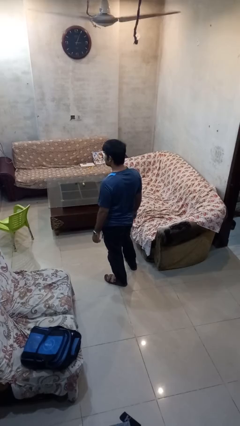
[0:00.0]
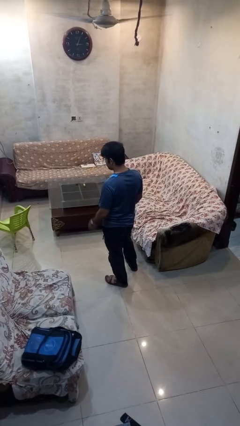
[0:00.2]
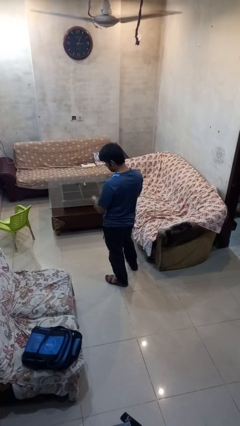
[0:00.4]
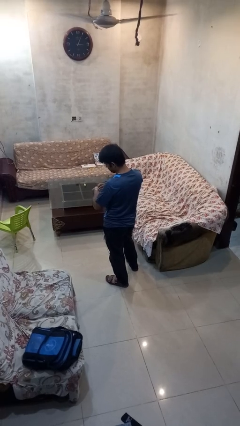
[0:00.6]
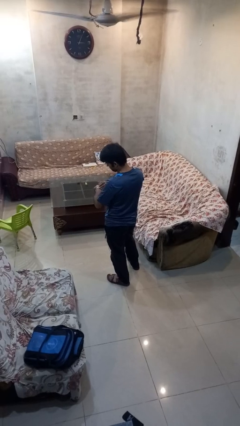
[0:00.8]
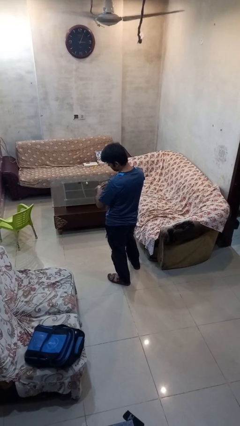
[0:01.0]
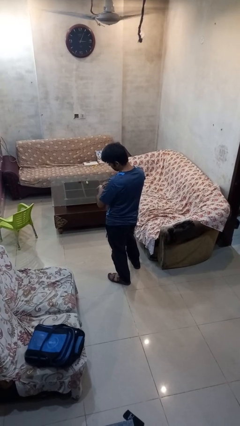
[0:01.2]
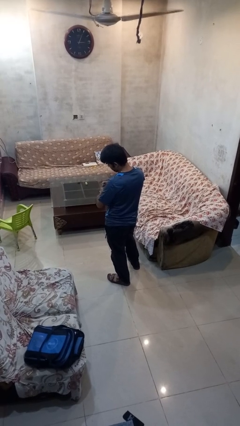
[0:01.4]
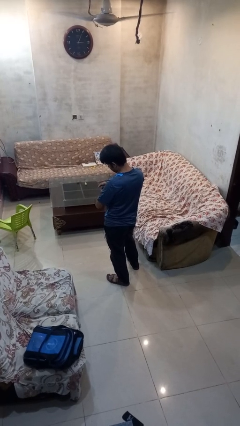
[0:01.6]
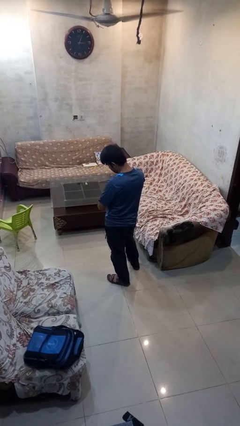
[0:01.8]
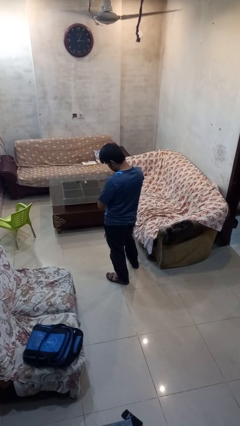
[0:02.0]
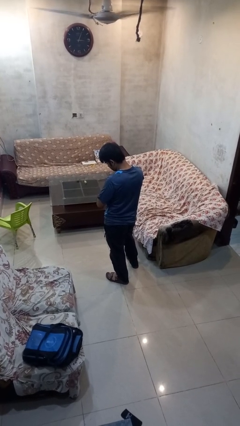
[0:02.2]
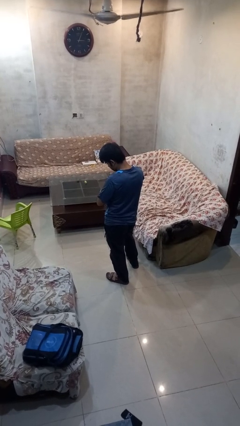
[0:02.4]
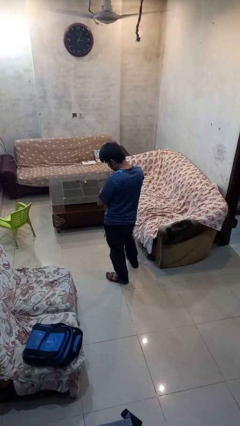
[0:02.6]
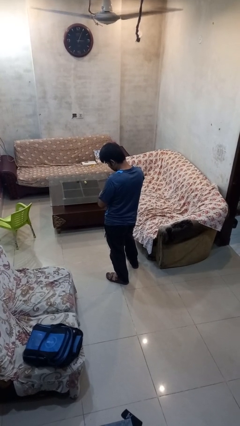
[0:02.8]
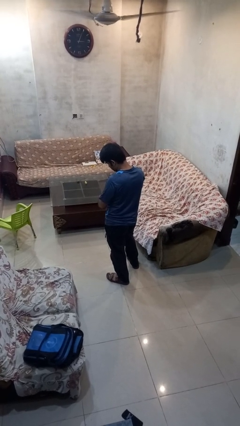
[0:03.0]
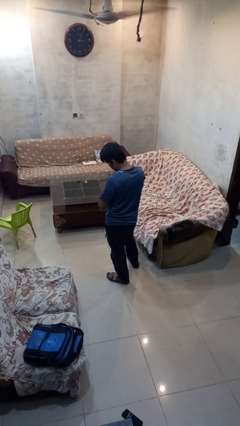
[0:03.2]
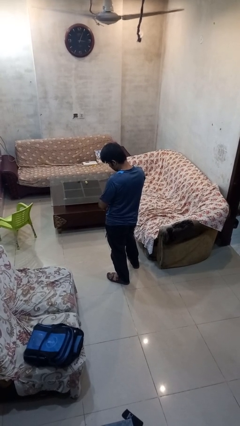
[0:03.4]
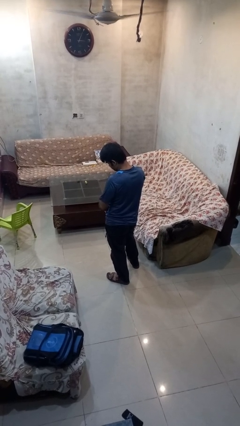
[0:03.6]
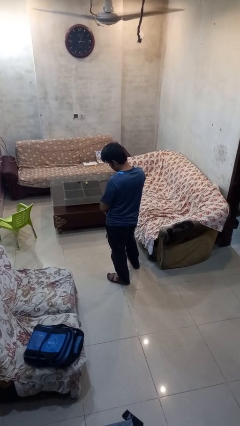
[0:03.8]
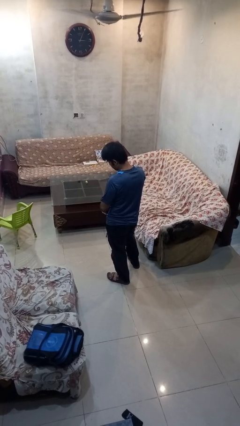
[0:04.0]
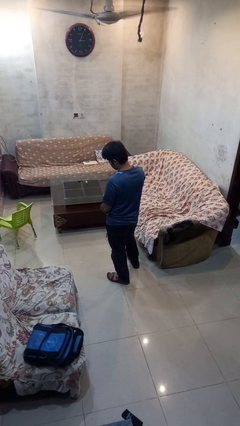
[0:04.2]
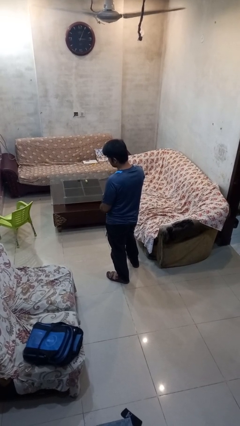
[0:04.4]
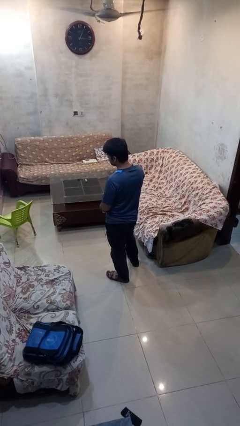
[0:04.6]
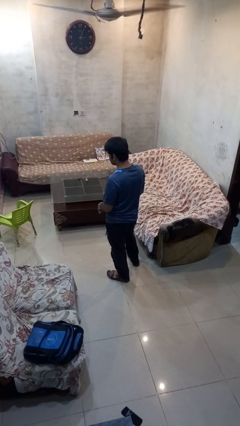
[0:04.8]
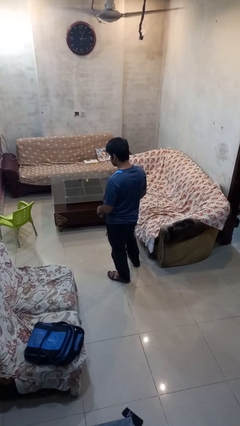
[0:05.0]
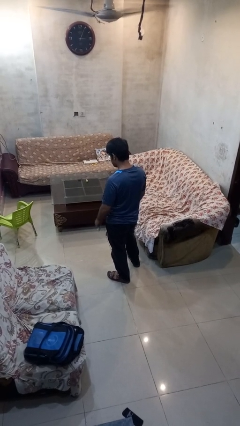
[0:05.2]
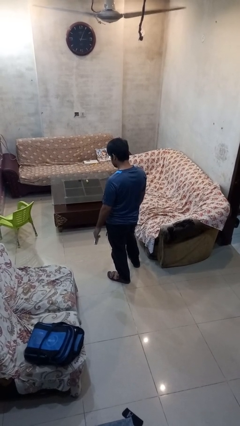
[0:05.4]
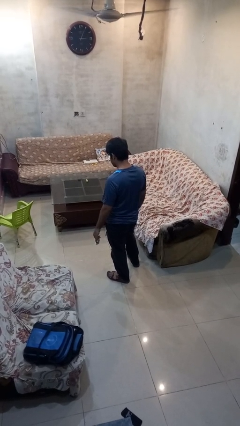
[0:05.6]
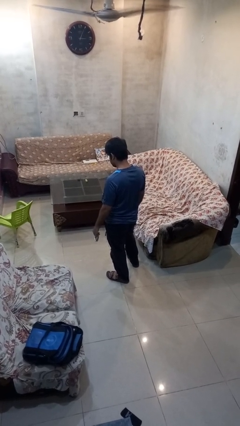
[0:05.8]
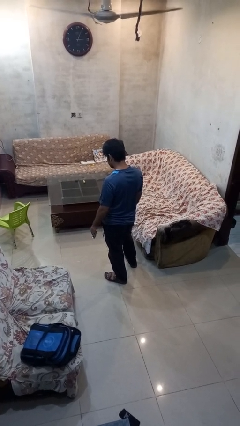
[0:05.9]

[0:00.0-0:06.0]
person takes off wristwatch

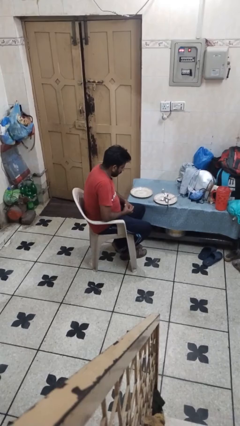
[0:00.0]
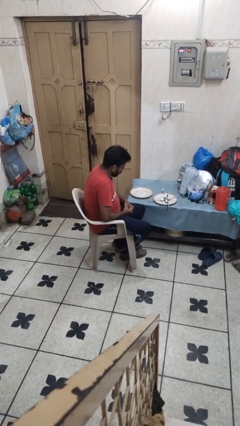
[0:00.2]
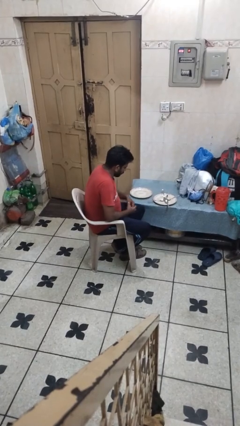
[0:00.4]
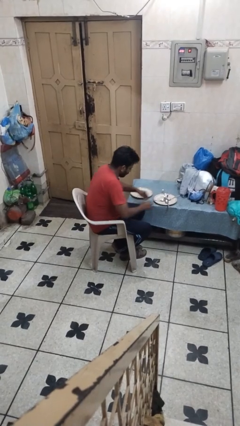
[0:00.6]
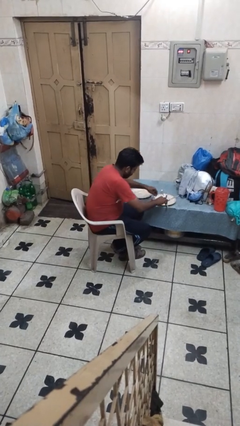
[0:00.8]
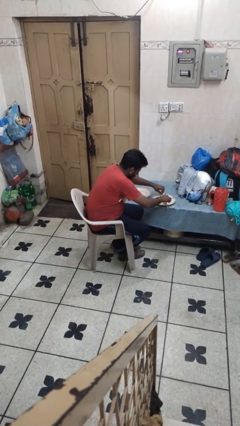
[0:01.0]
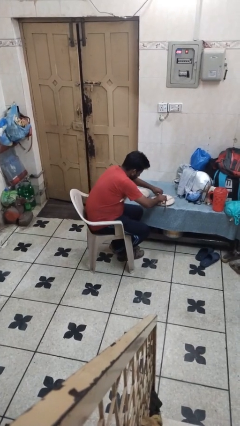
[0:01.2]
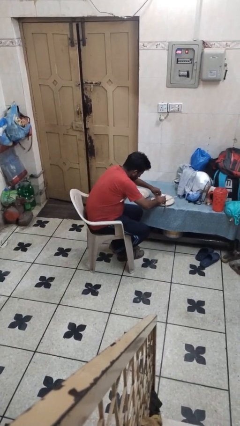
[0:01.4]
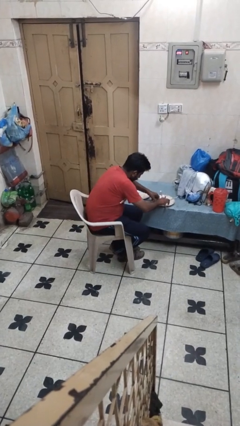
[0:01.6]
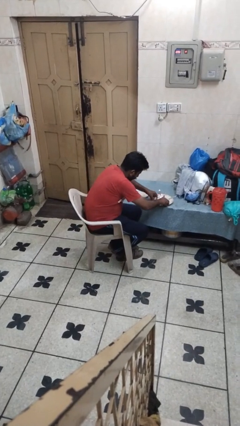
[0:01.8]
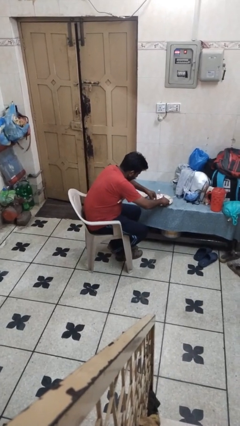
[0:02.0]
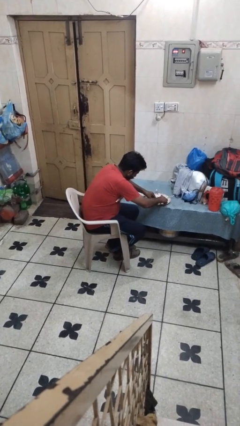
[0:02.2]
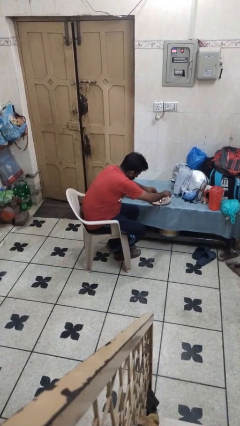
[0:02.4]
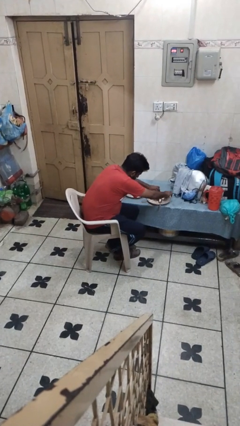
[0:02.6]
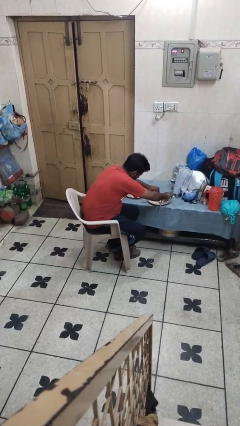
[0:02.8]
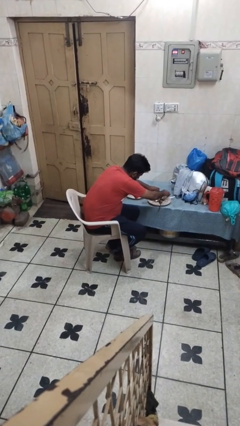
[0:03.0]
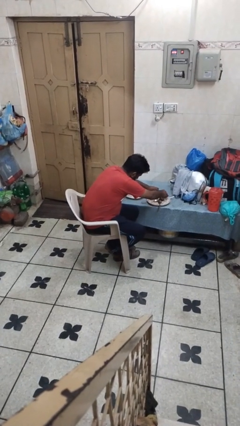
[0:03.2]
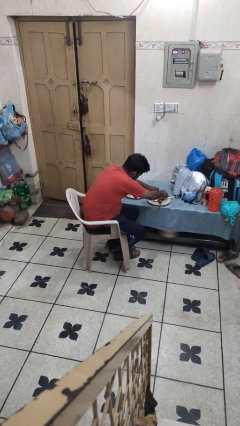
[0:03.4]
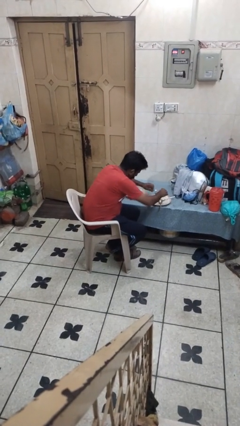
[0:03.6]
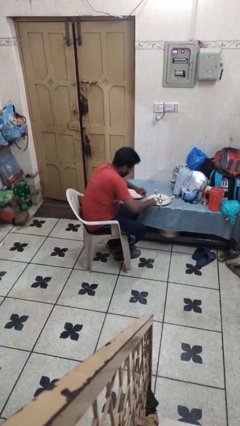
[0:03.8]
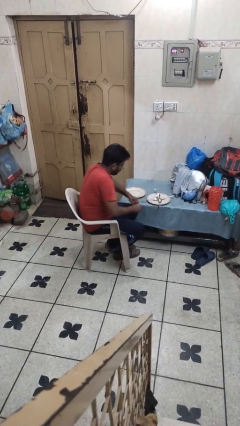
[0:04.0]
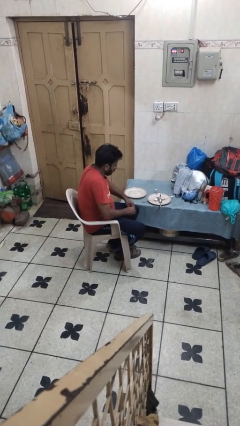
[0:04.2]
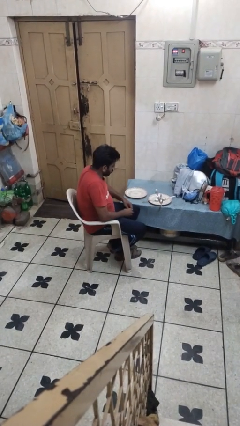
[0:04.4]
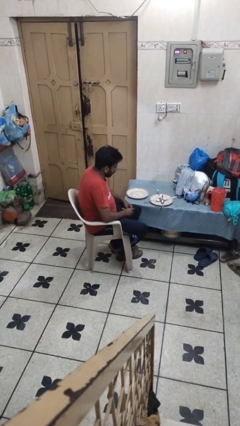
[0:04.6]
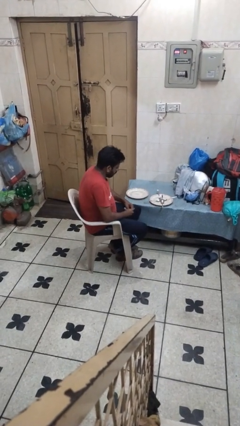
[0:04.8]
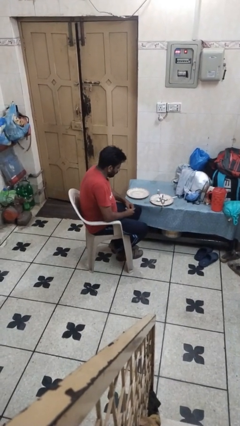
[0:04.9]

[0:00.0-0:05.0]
person sets table

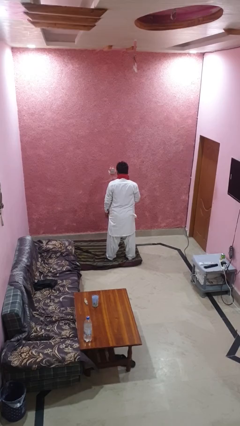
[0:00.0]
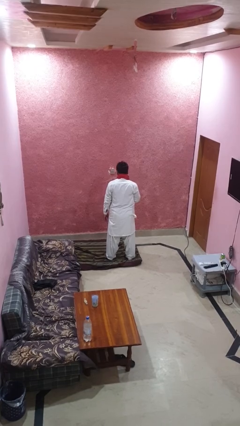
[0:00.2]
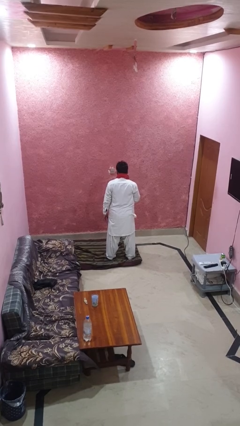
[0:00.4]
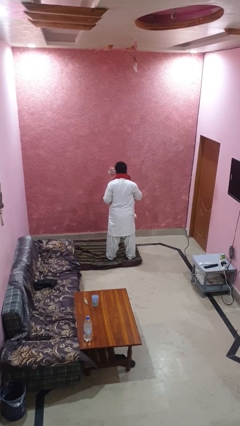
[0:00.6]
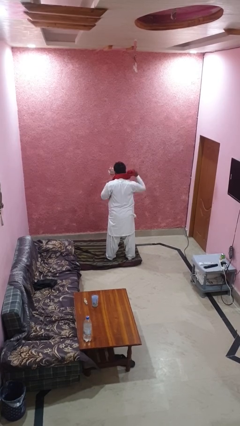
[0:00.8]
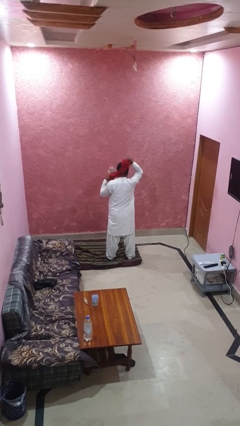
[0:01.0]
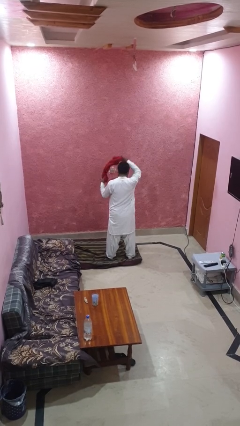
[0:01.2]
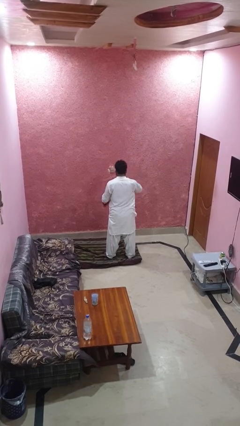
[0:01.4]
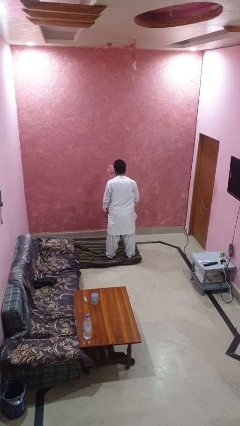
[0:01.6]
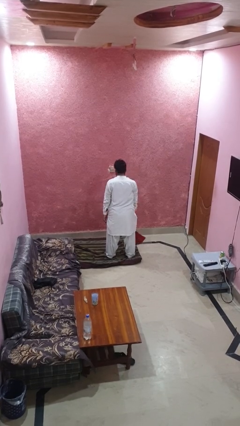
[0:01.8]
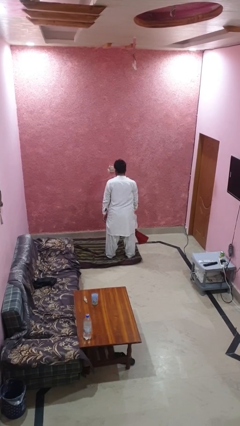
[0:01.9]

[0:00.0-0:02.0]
person takes off scarf

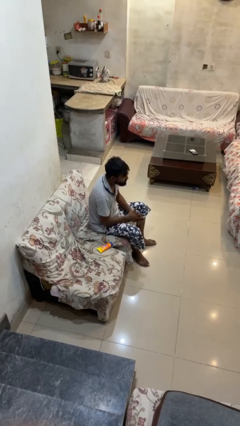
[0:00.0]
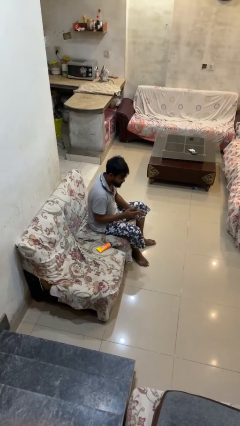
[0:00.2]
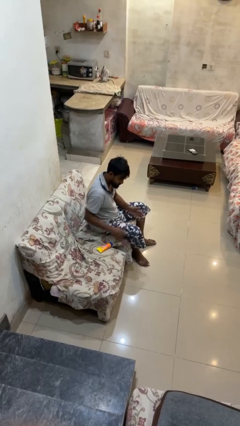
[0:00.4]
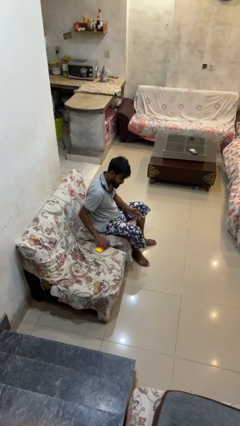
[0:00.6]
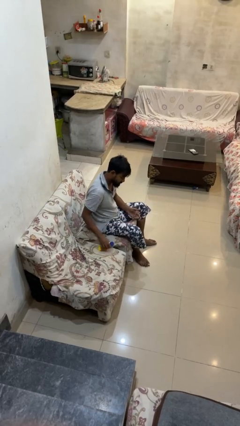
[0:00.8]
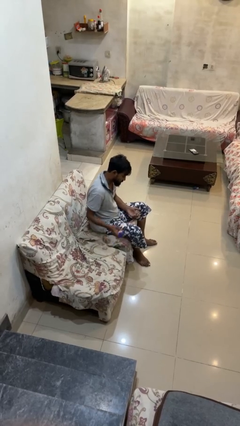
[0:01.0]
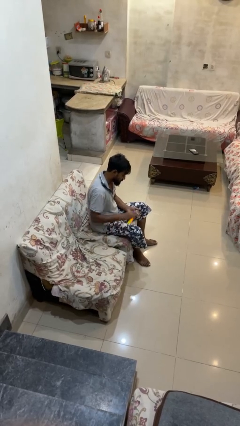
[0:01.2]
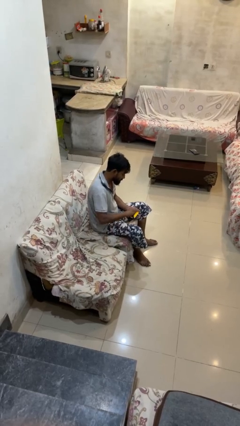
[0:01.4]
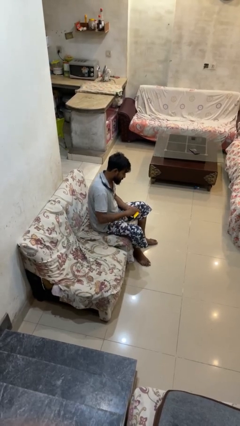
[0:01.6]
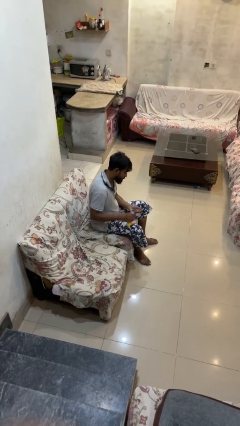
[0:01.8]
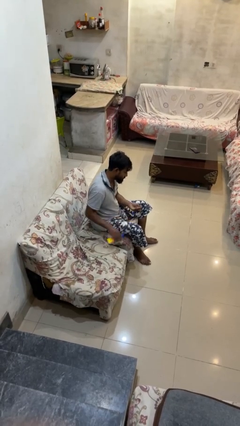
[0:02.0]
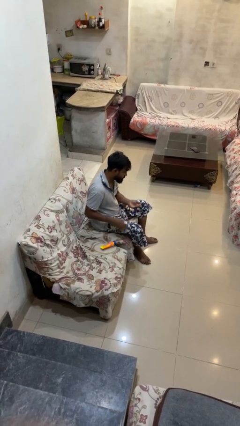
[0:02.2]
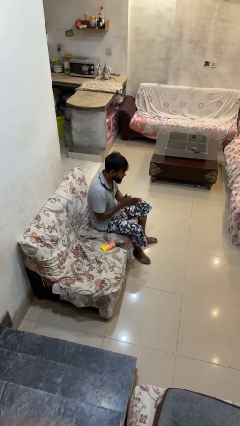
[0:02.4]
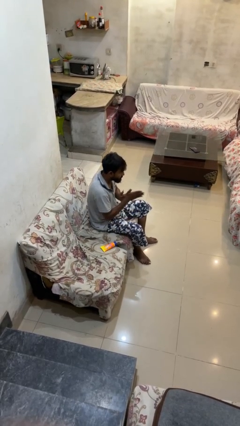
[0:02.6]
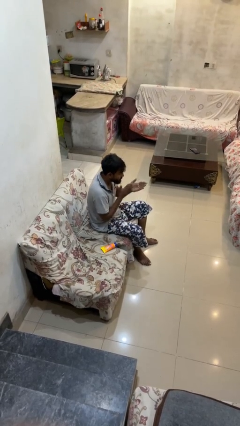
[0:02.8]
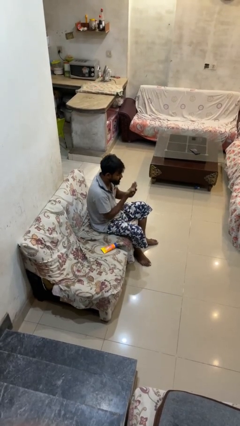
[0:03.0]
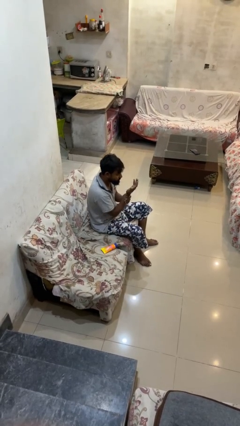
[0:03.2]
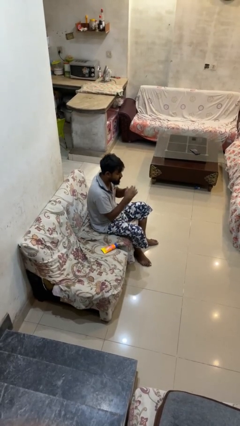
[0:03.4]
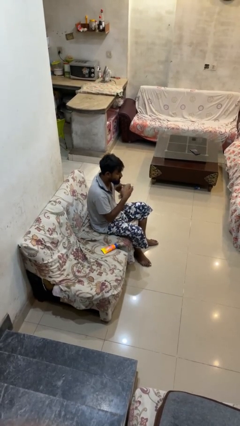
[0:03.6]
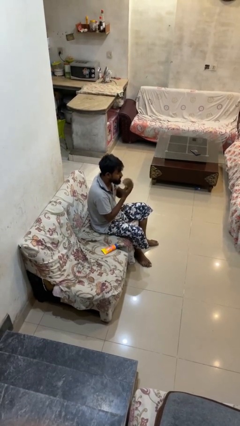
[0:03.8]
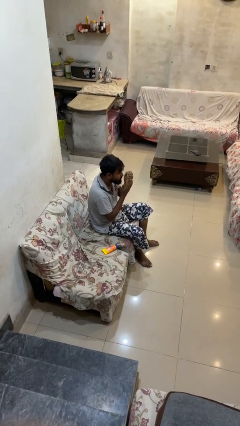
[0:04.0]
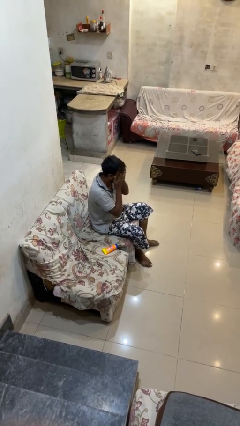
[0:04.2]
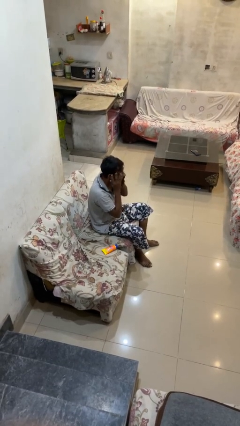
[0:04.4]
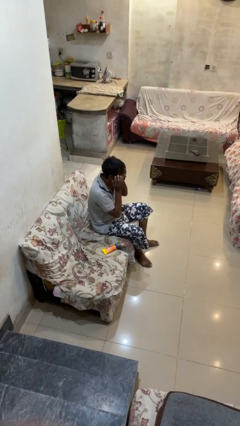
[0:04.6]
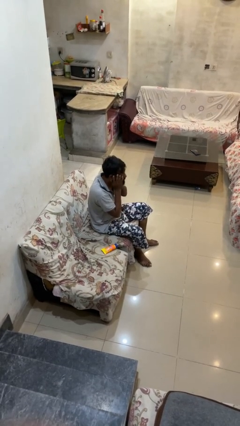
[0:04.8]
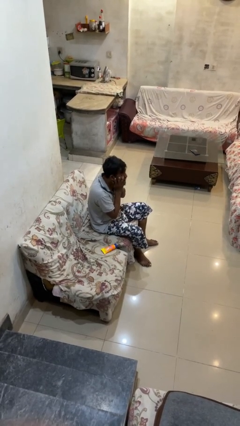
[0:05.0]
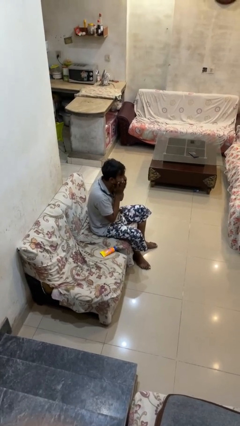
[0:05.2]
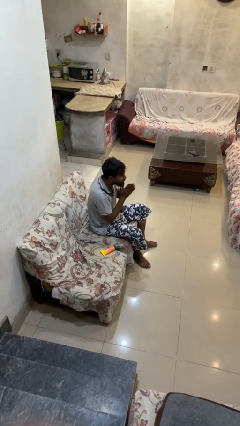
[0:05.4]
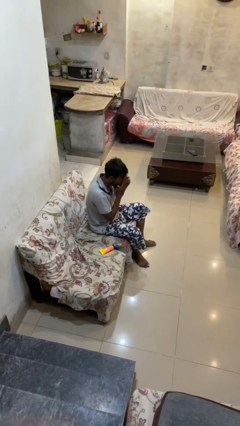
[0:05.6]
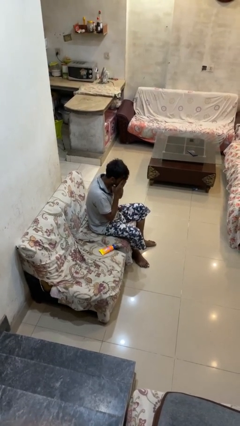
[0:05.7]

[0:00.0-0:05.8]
person applies facial moisturizer
